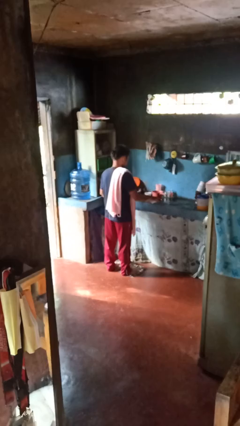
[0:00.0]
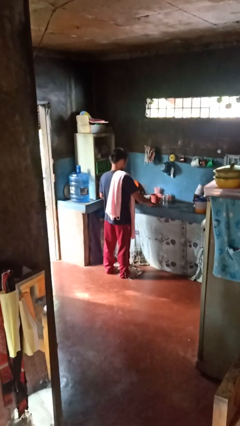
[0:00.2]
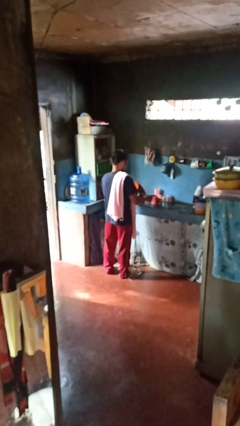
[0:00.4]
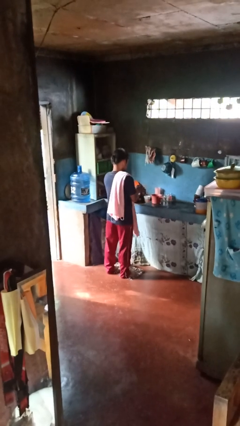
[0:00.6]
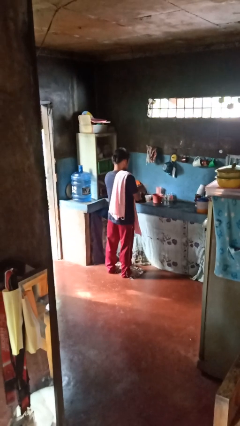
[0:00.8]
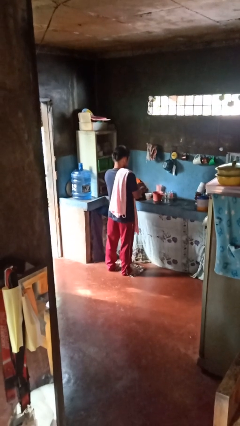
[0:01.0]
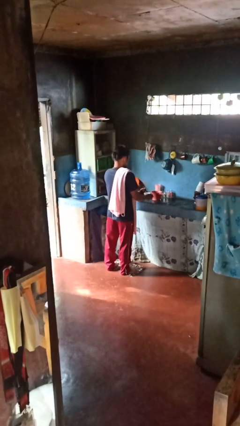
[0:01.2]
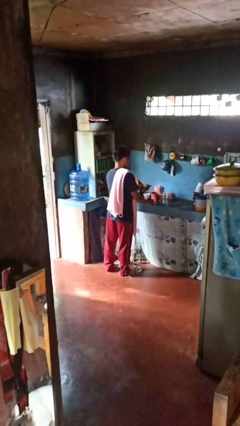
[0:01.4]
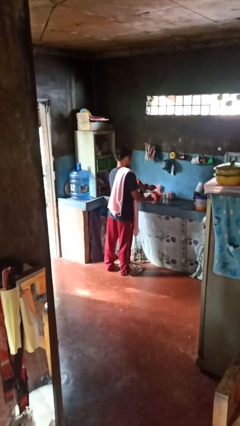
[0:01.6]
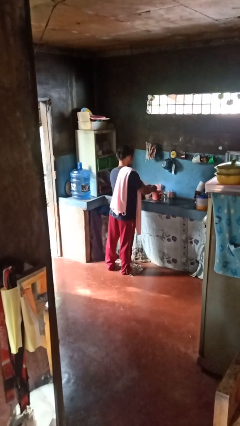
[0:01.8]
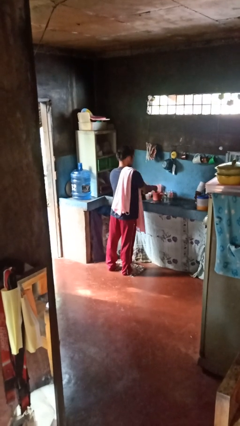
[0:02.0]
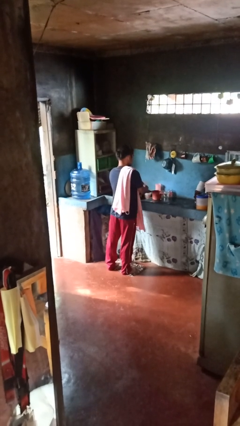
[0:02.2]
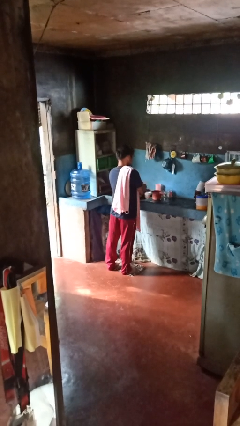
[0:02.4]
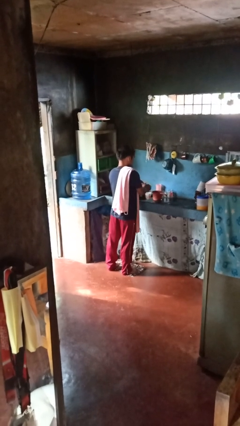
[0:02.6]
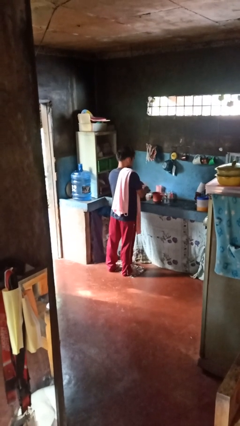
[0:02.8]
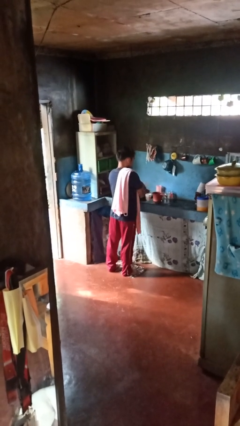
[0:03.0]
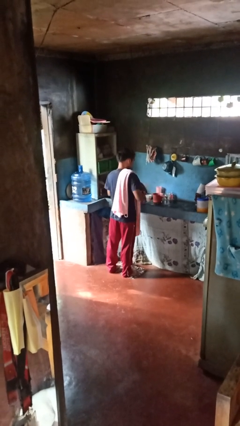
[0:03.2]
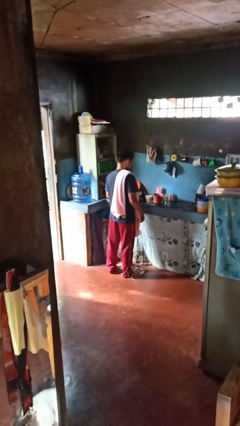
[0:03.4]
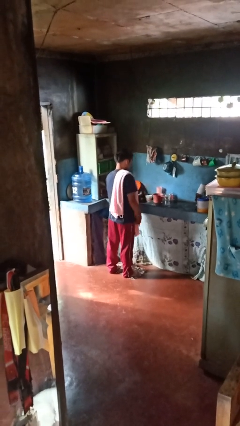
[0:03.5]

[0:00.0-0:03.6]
person washes hands

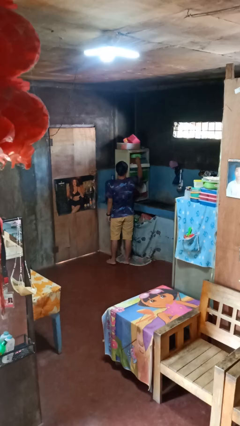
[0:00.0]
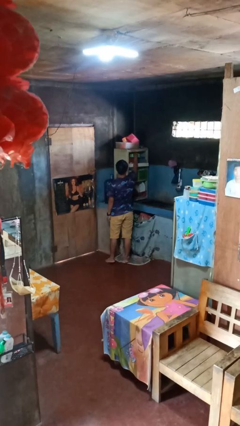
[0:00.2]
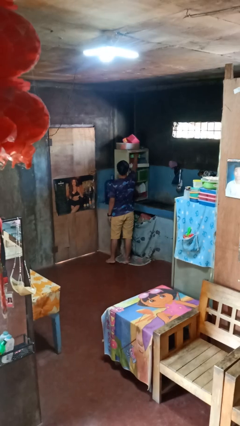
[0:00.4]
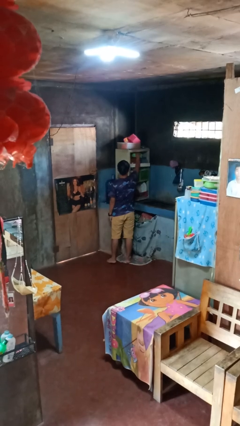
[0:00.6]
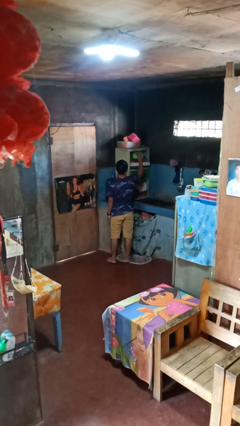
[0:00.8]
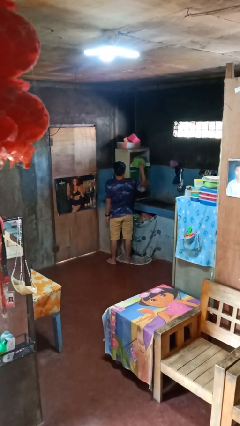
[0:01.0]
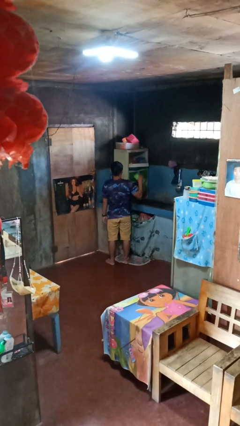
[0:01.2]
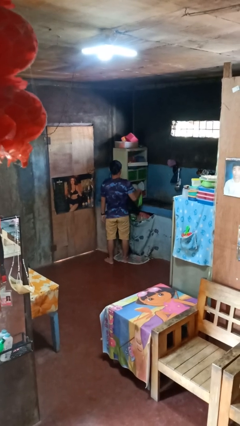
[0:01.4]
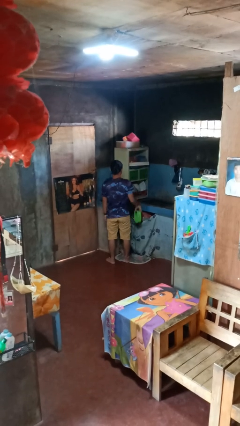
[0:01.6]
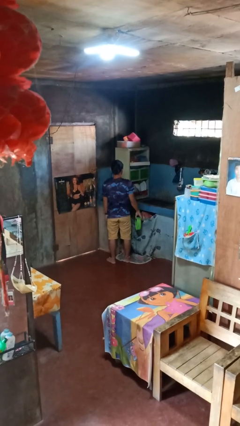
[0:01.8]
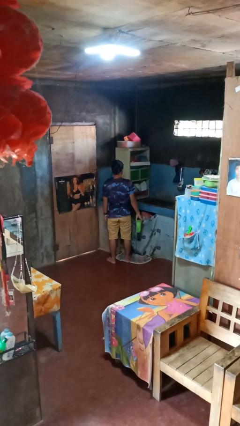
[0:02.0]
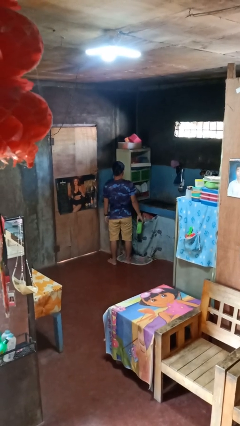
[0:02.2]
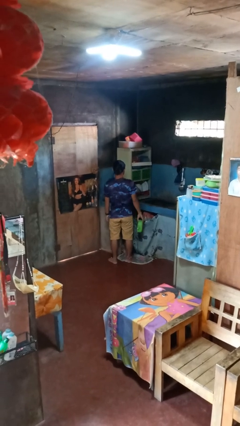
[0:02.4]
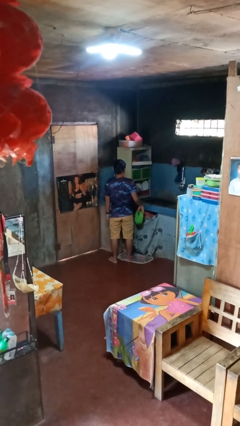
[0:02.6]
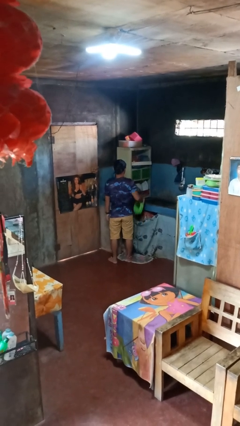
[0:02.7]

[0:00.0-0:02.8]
person takes object from cabinet

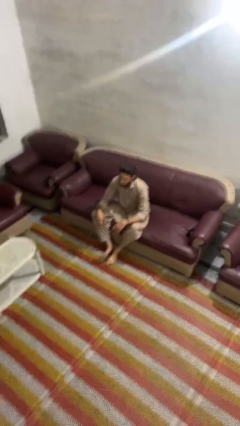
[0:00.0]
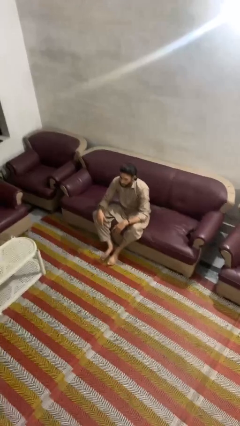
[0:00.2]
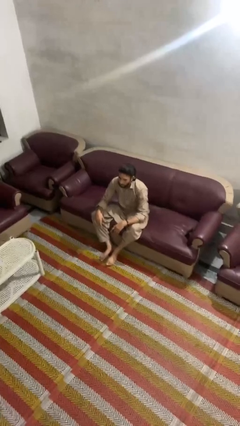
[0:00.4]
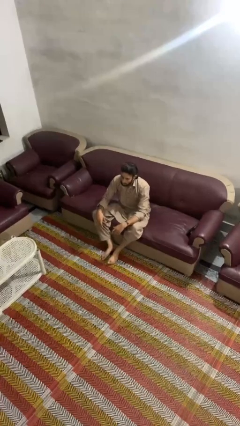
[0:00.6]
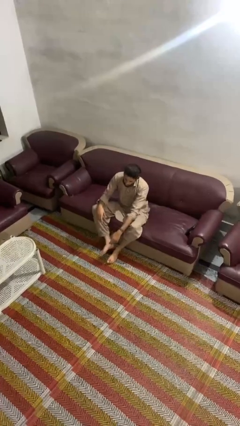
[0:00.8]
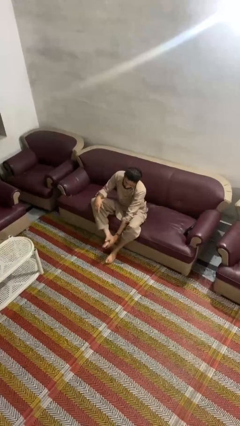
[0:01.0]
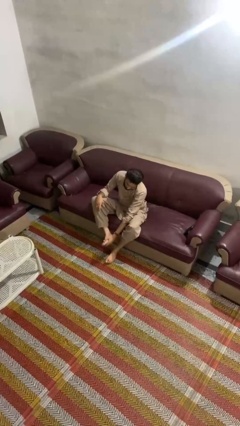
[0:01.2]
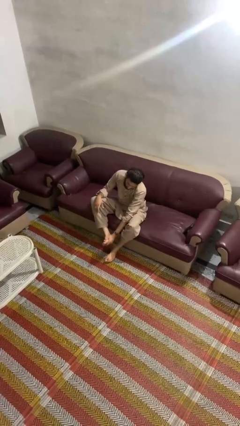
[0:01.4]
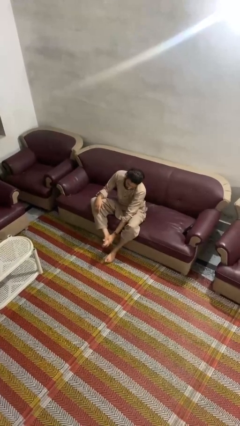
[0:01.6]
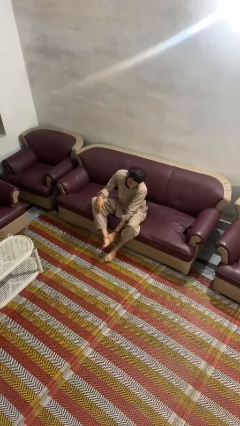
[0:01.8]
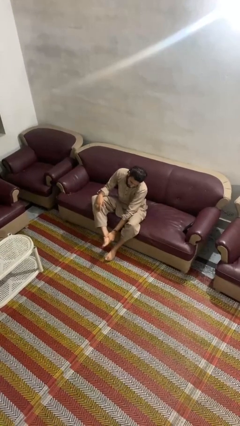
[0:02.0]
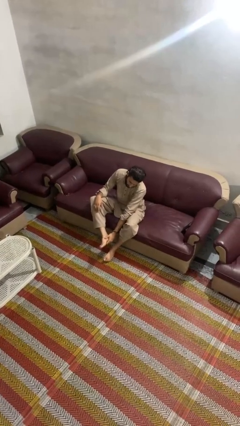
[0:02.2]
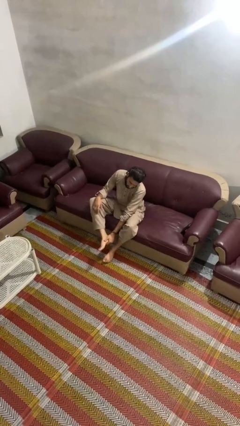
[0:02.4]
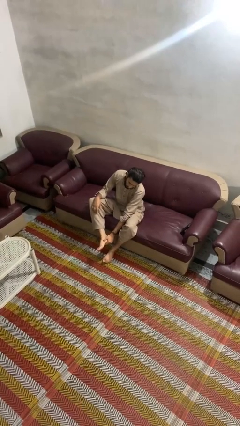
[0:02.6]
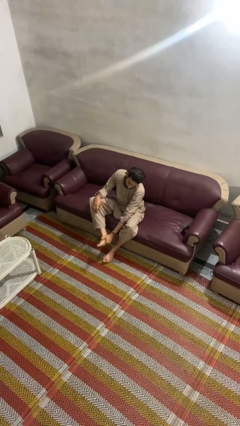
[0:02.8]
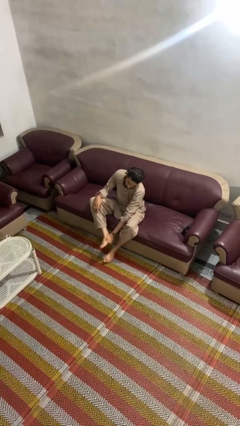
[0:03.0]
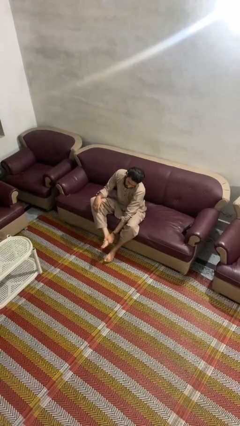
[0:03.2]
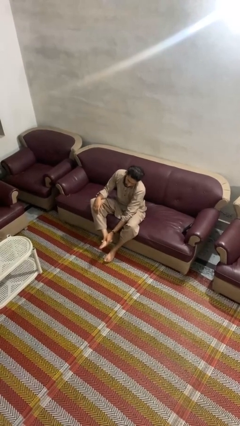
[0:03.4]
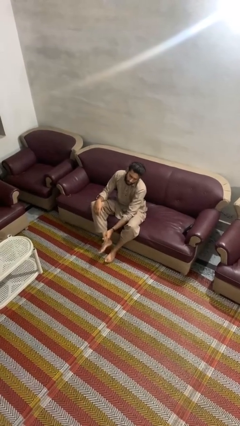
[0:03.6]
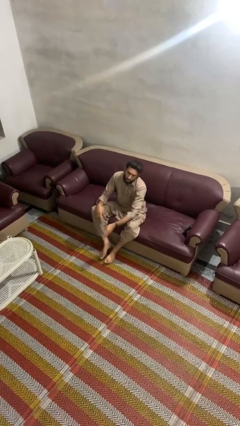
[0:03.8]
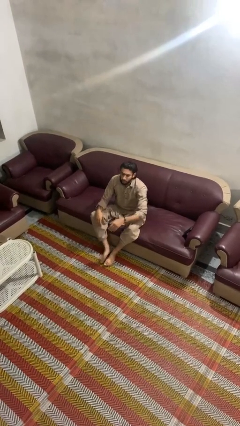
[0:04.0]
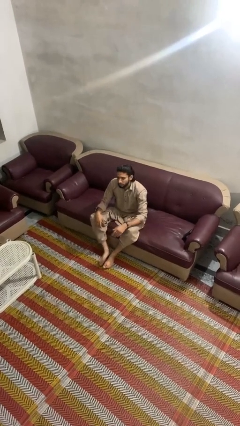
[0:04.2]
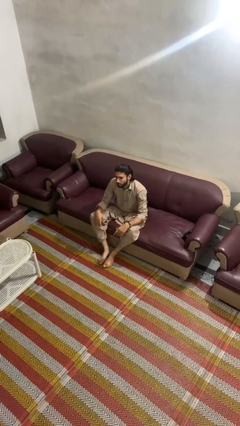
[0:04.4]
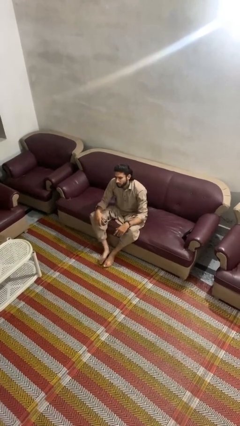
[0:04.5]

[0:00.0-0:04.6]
person rubs foot

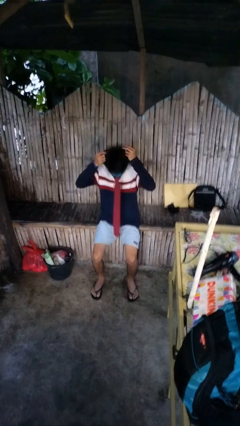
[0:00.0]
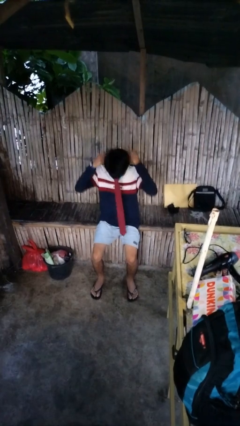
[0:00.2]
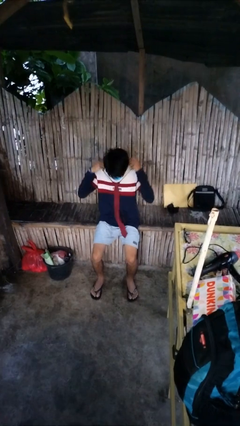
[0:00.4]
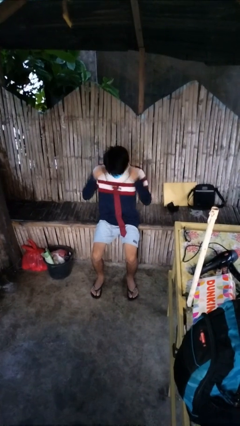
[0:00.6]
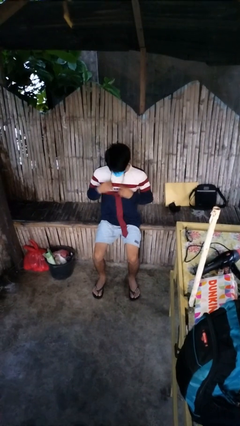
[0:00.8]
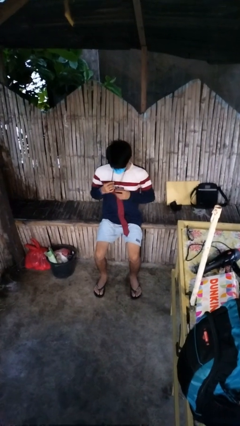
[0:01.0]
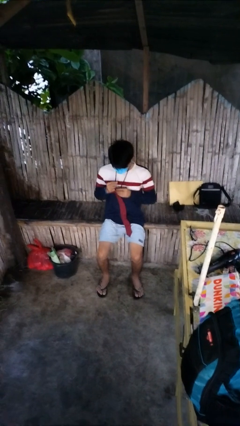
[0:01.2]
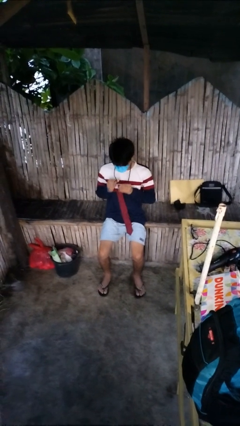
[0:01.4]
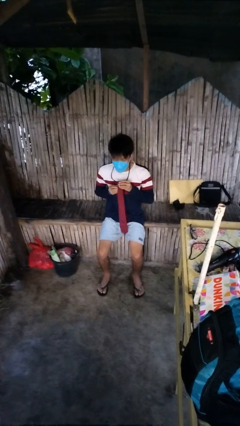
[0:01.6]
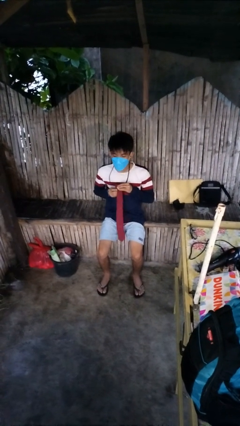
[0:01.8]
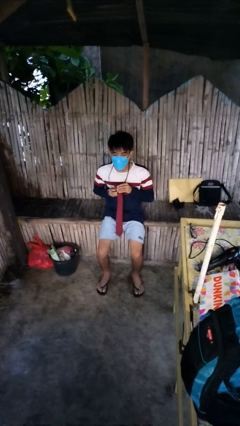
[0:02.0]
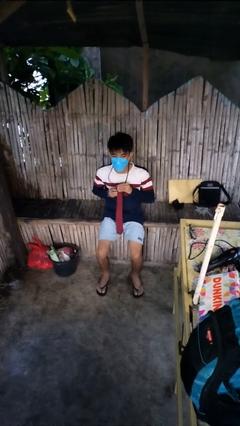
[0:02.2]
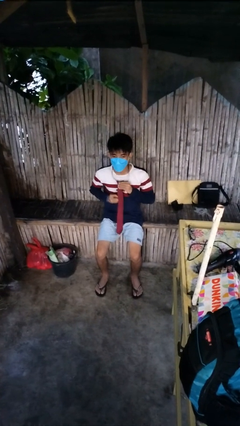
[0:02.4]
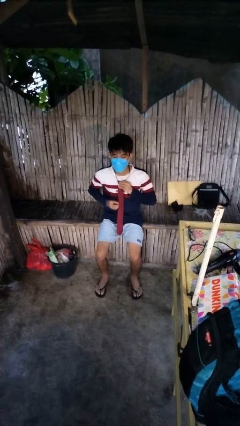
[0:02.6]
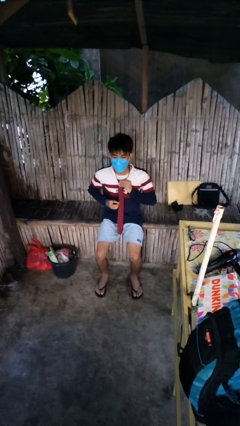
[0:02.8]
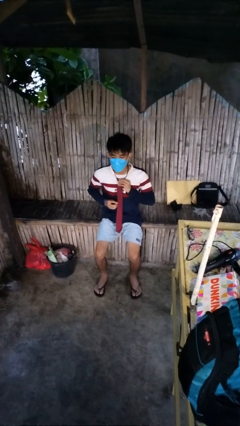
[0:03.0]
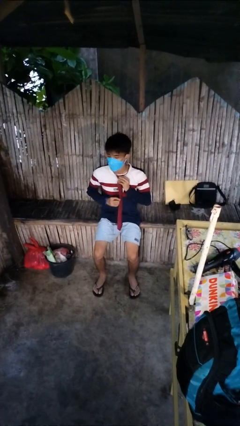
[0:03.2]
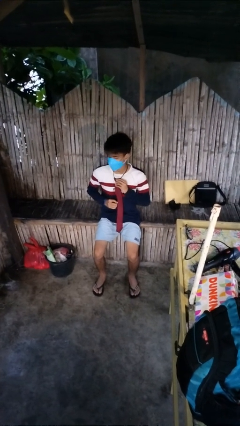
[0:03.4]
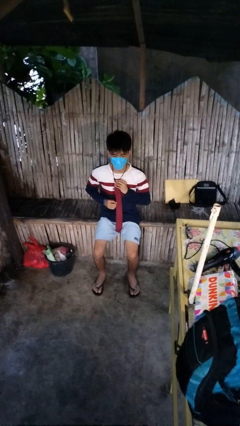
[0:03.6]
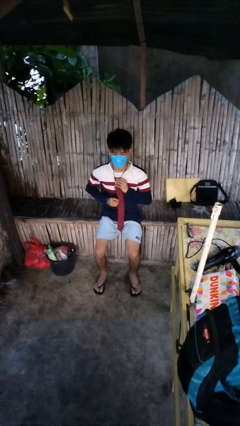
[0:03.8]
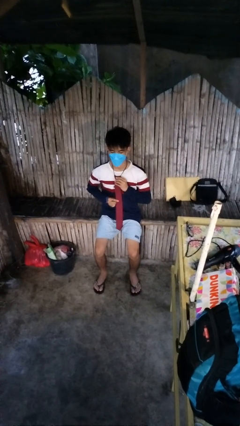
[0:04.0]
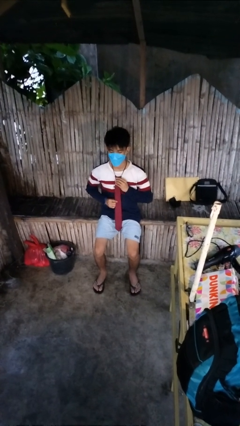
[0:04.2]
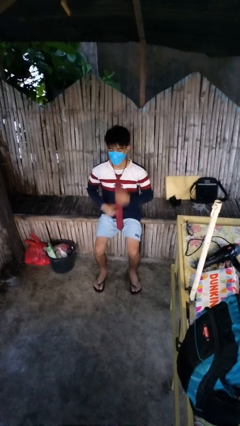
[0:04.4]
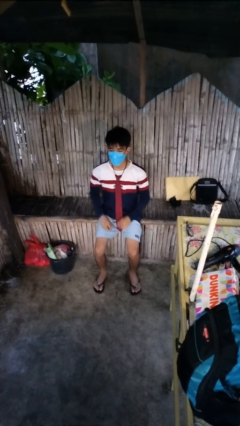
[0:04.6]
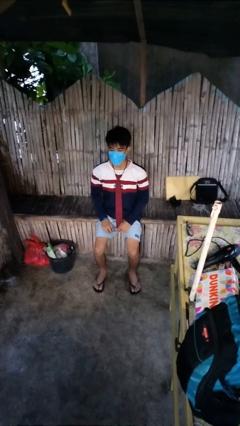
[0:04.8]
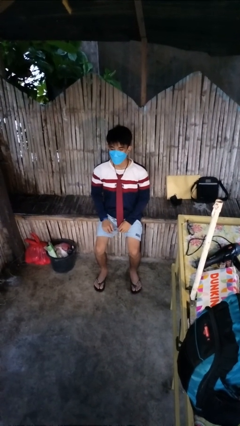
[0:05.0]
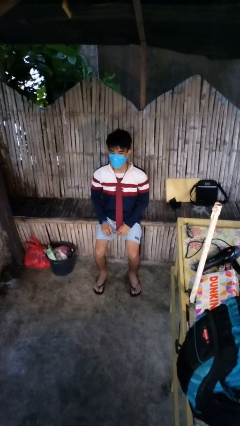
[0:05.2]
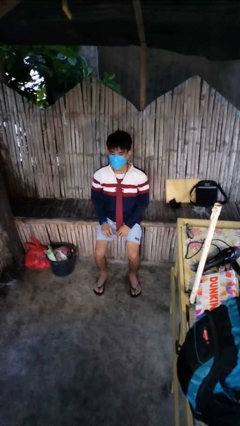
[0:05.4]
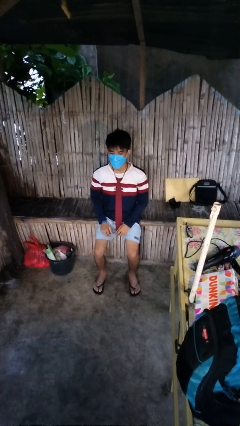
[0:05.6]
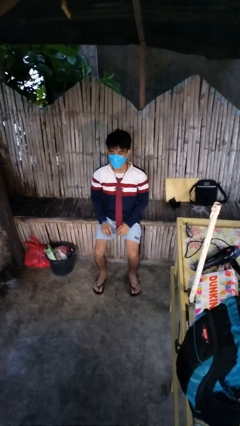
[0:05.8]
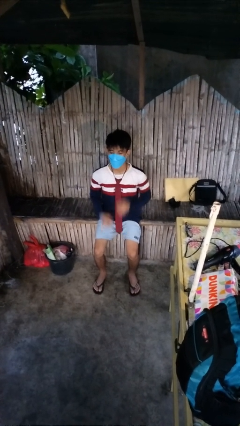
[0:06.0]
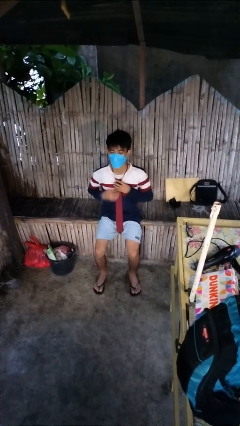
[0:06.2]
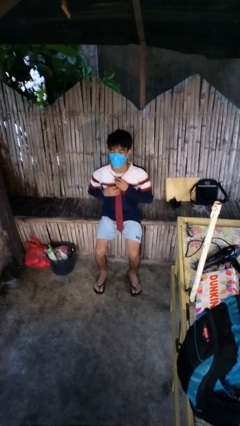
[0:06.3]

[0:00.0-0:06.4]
person puts on necktie

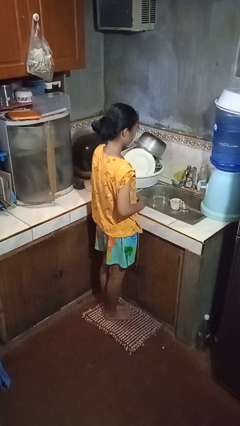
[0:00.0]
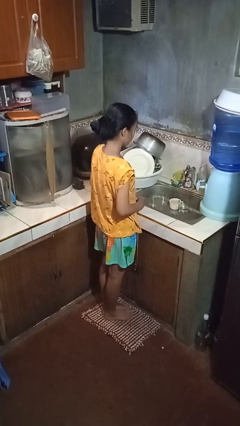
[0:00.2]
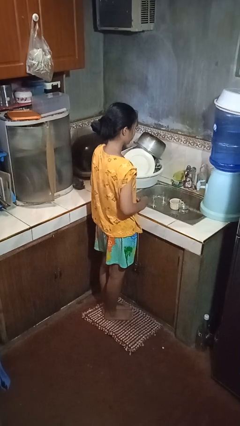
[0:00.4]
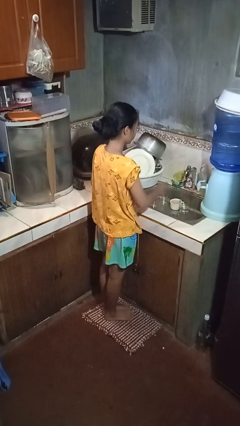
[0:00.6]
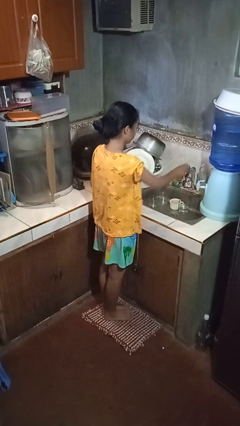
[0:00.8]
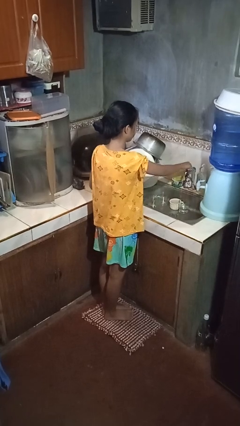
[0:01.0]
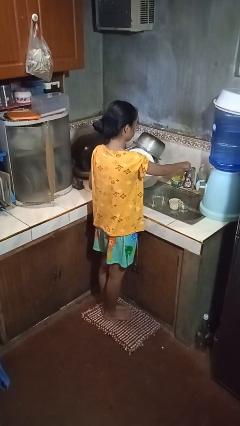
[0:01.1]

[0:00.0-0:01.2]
person turns off faucet
